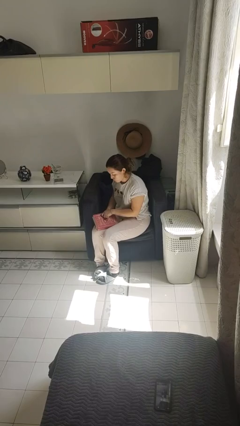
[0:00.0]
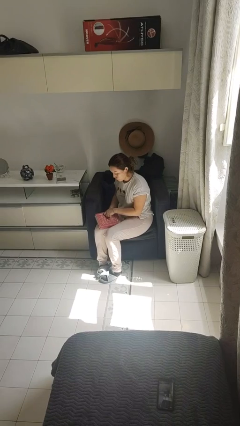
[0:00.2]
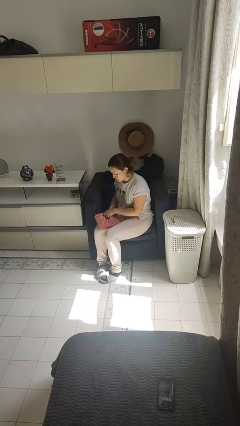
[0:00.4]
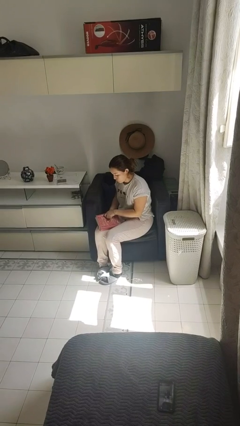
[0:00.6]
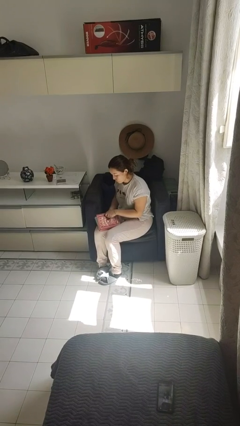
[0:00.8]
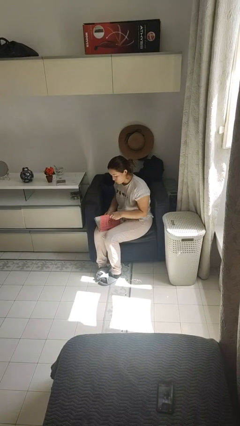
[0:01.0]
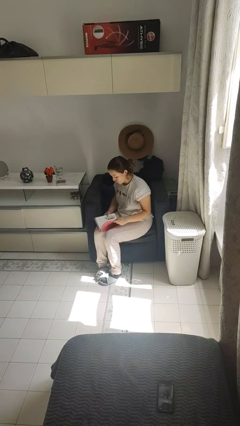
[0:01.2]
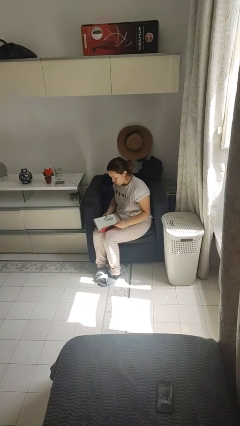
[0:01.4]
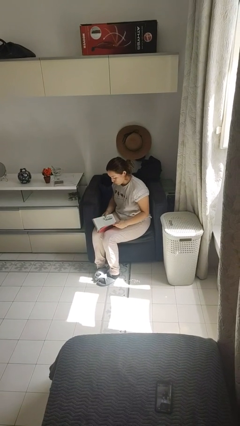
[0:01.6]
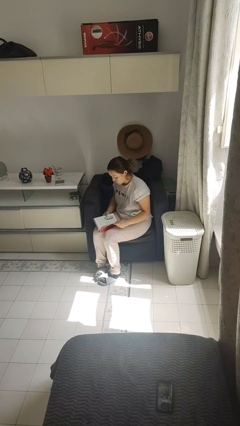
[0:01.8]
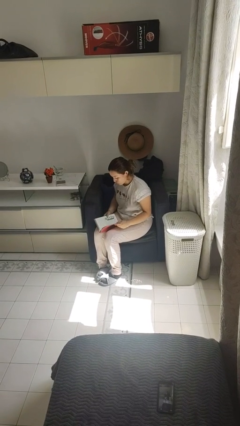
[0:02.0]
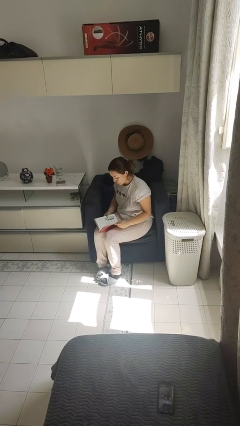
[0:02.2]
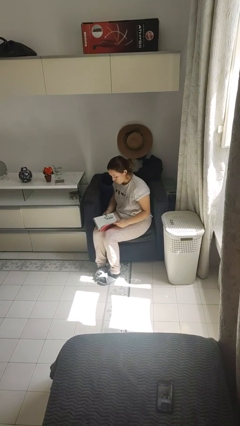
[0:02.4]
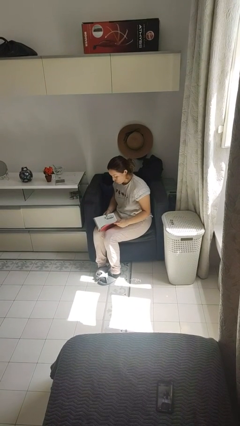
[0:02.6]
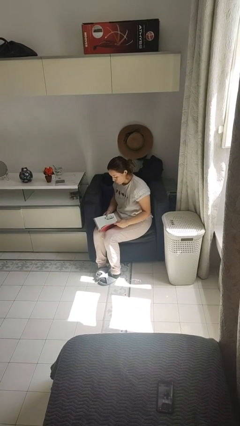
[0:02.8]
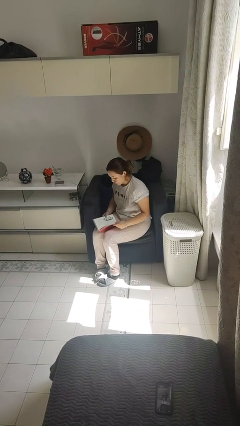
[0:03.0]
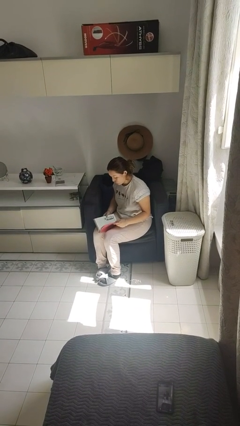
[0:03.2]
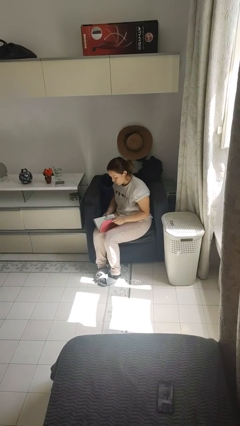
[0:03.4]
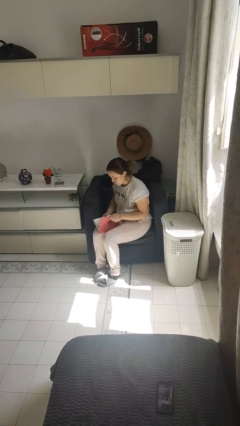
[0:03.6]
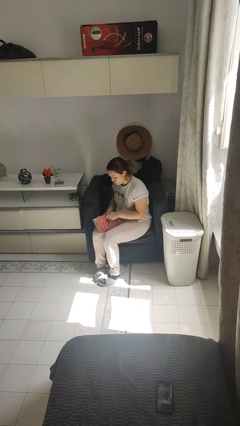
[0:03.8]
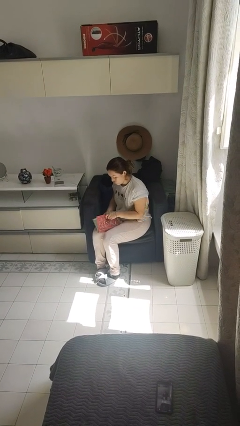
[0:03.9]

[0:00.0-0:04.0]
person reads book

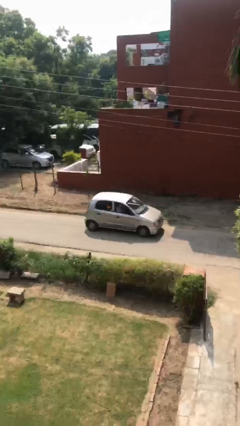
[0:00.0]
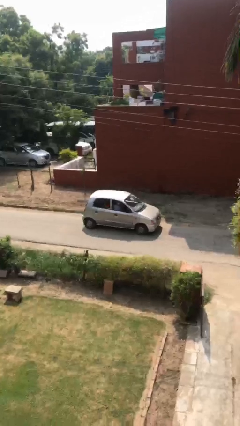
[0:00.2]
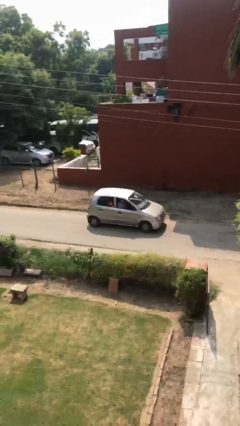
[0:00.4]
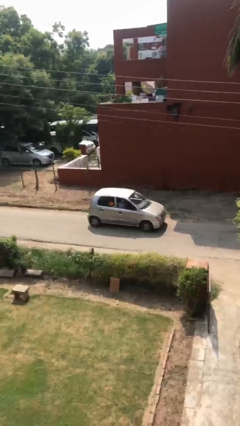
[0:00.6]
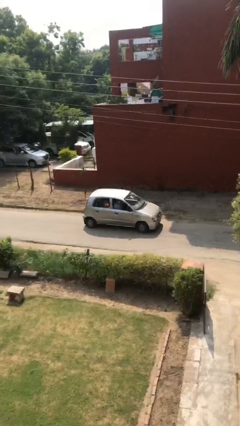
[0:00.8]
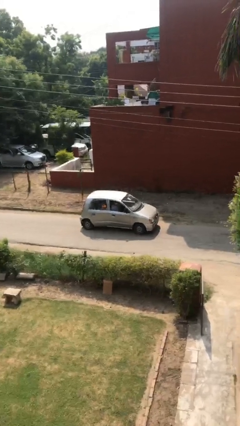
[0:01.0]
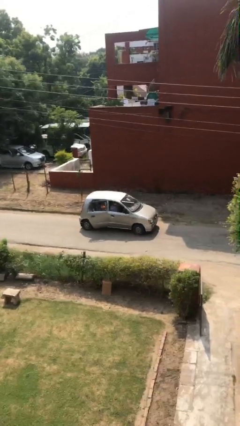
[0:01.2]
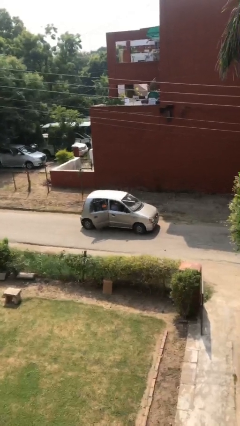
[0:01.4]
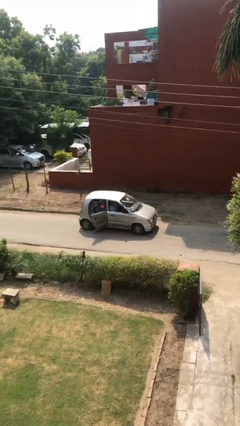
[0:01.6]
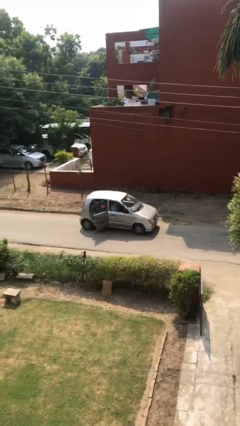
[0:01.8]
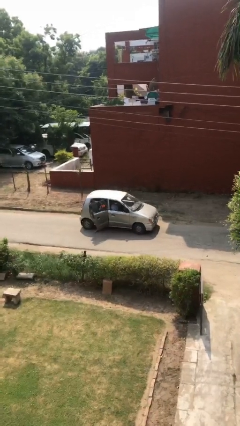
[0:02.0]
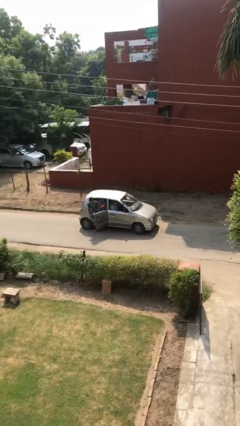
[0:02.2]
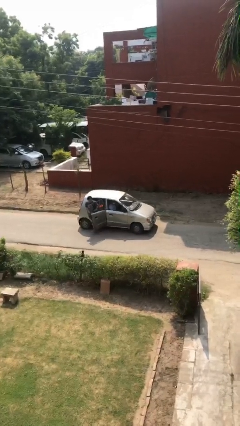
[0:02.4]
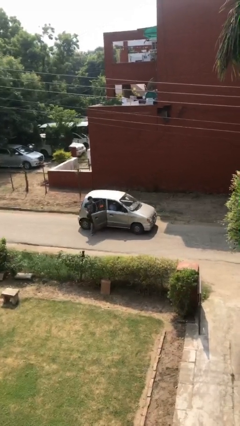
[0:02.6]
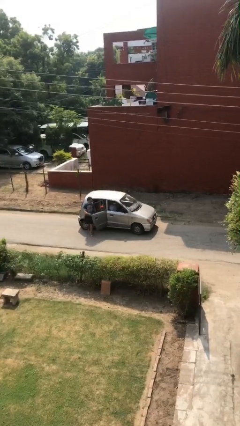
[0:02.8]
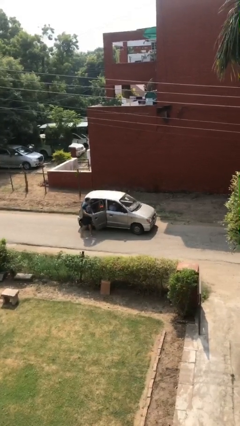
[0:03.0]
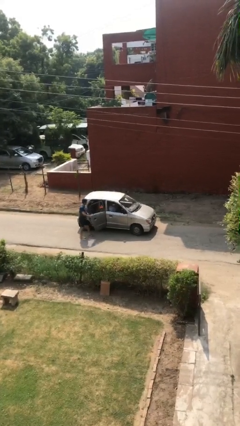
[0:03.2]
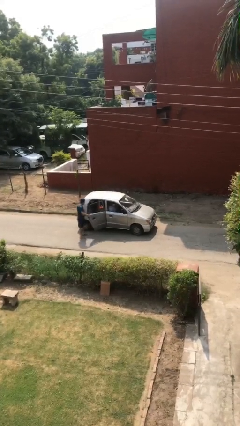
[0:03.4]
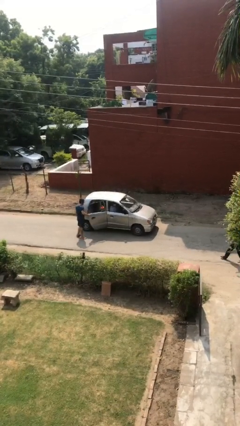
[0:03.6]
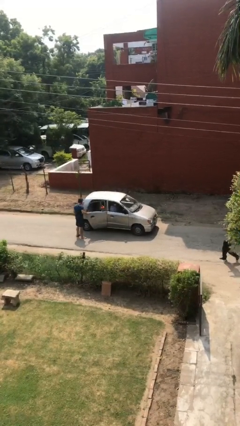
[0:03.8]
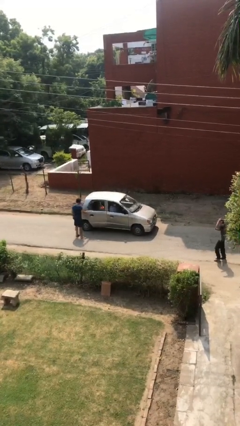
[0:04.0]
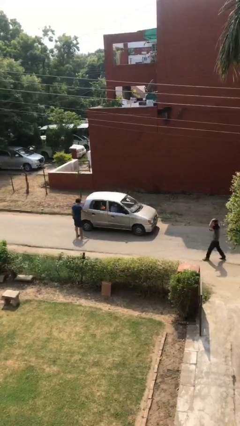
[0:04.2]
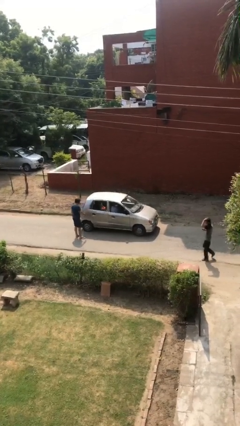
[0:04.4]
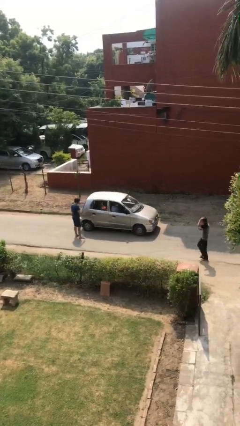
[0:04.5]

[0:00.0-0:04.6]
car drops off person

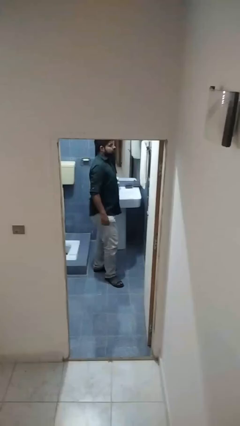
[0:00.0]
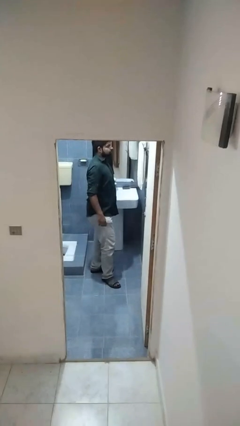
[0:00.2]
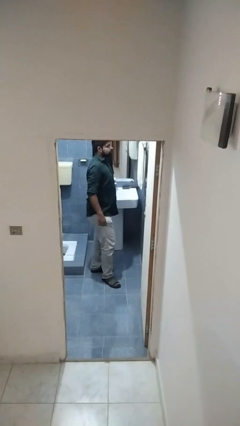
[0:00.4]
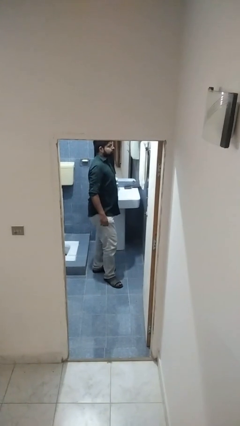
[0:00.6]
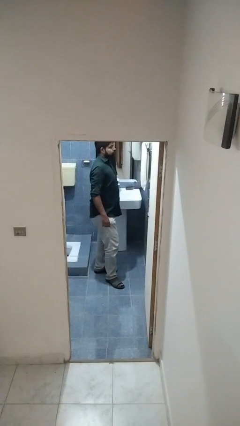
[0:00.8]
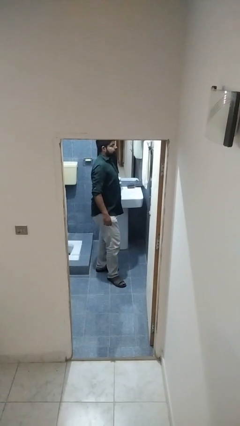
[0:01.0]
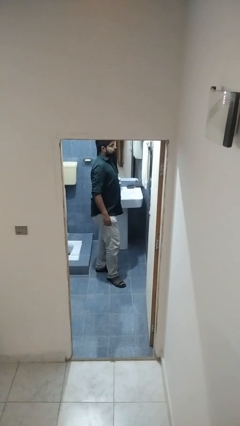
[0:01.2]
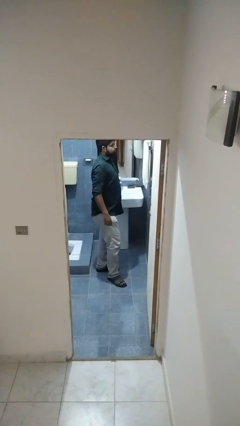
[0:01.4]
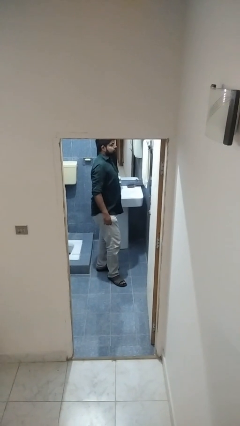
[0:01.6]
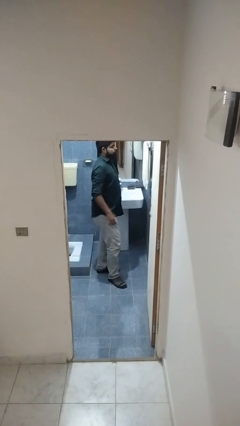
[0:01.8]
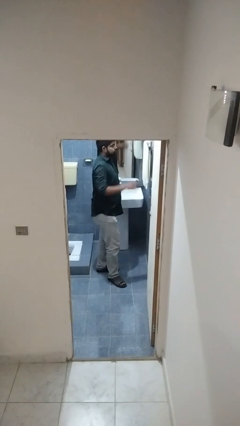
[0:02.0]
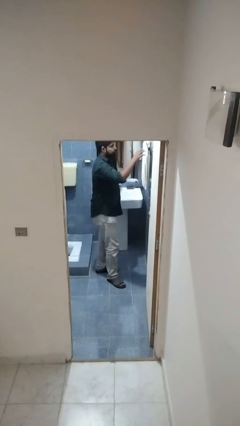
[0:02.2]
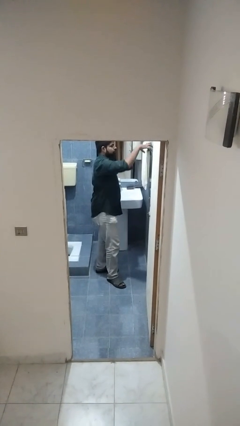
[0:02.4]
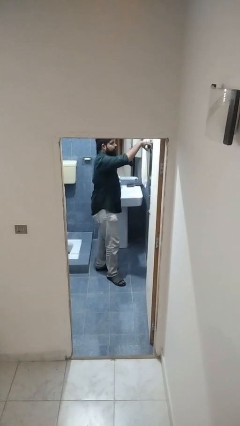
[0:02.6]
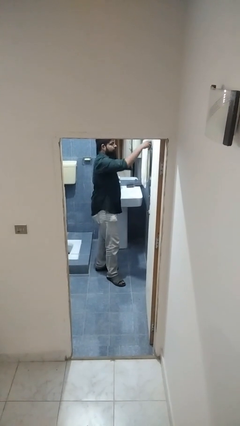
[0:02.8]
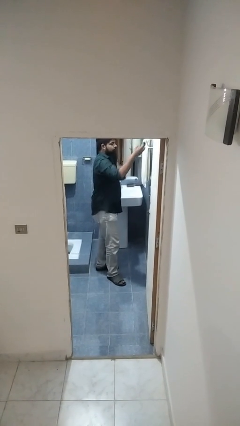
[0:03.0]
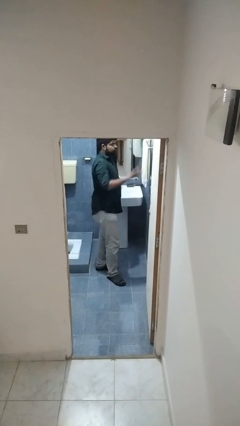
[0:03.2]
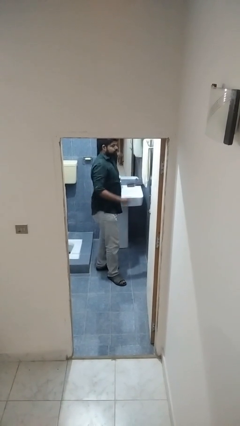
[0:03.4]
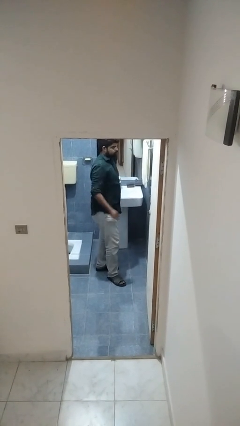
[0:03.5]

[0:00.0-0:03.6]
person picks up object from countertop

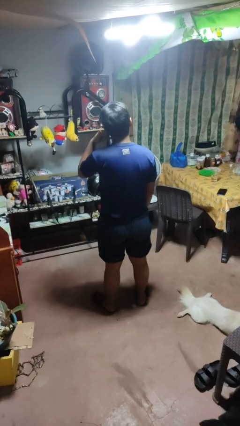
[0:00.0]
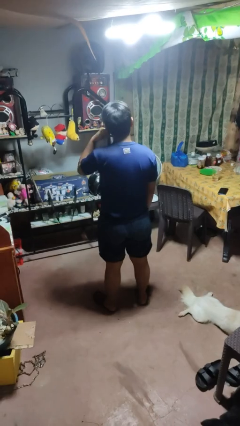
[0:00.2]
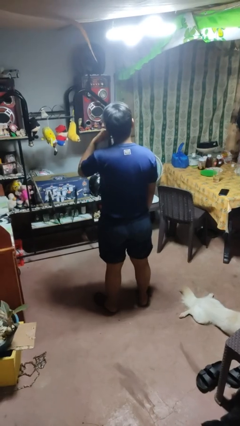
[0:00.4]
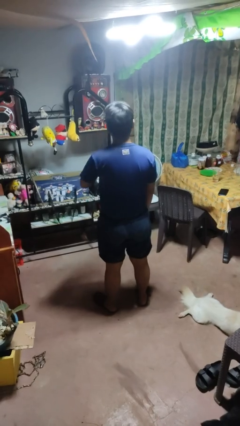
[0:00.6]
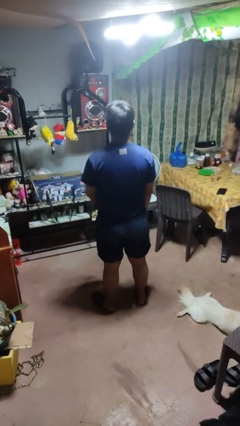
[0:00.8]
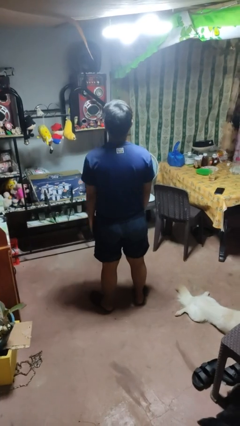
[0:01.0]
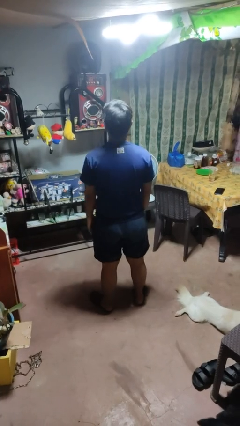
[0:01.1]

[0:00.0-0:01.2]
person gestures call me

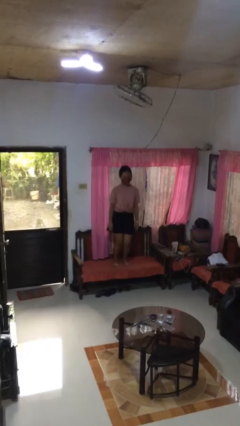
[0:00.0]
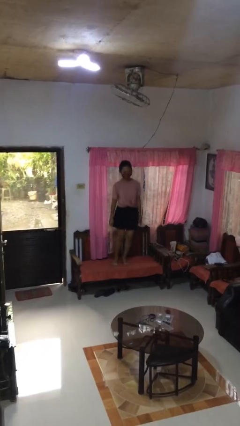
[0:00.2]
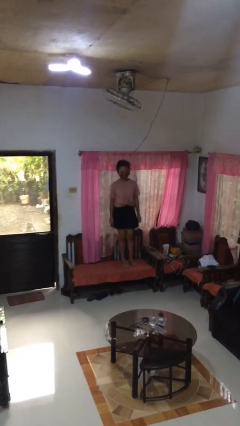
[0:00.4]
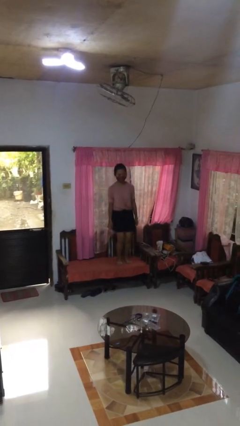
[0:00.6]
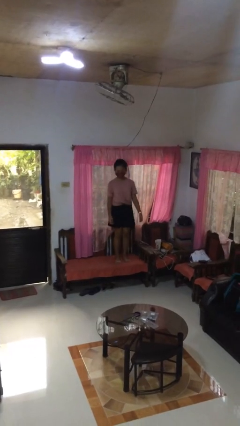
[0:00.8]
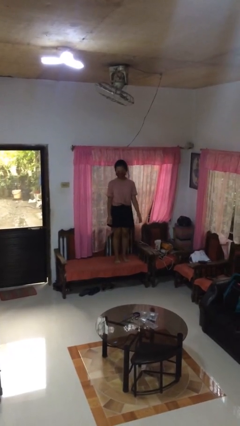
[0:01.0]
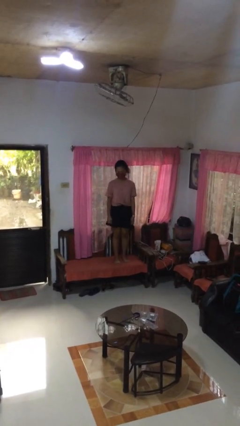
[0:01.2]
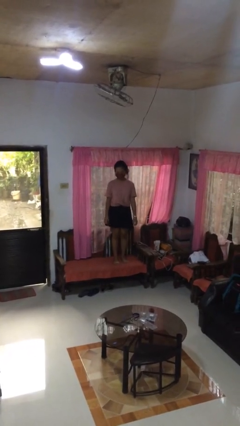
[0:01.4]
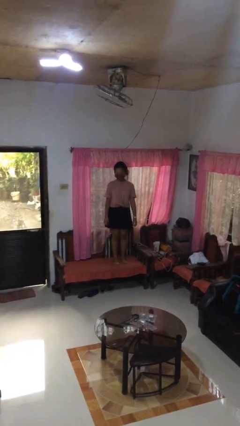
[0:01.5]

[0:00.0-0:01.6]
person jumps on couch

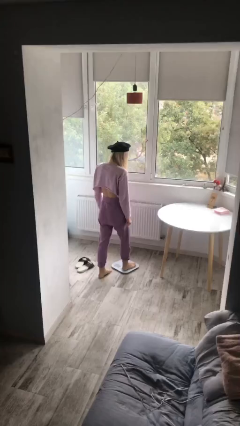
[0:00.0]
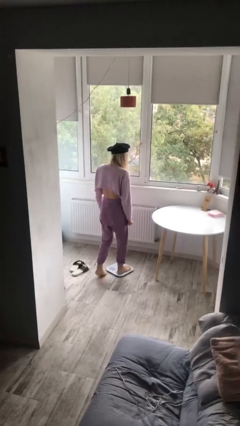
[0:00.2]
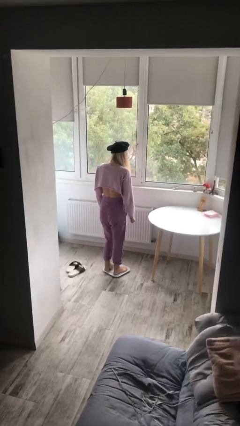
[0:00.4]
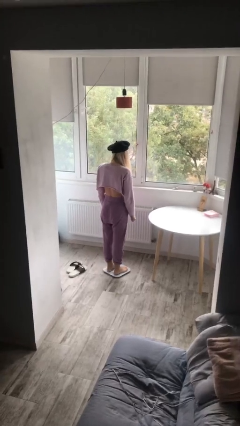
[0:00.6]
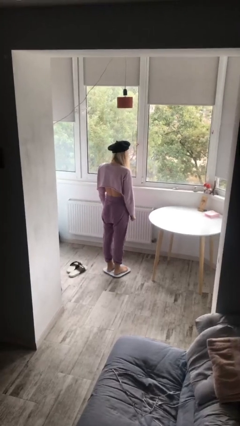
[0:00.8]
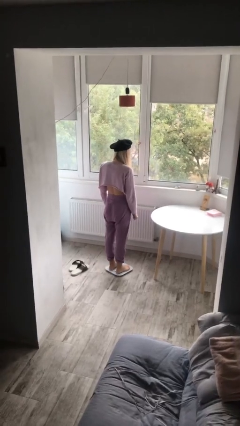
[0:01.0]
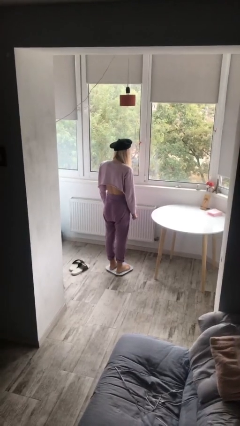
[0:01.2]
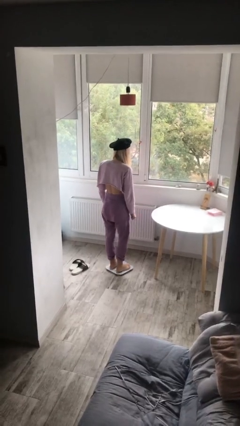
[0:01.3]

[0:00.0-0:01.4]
person uses bodyweight scale

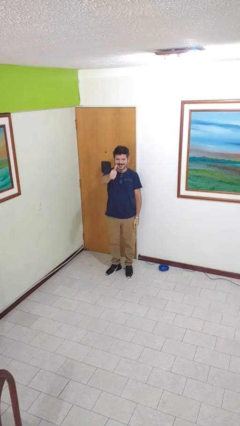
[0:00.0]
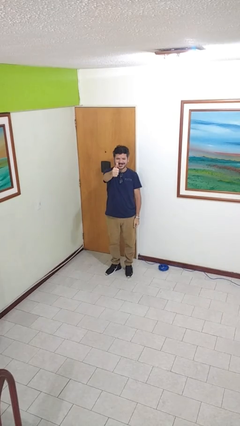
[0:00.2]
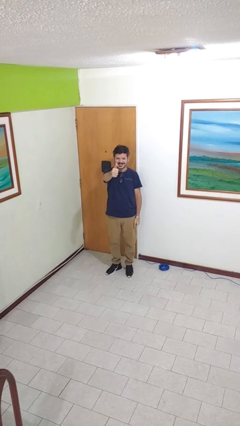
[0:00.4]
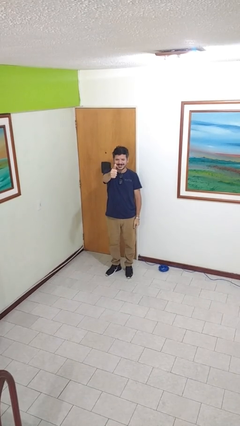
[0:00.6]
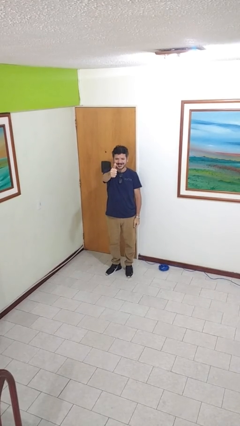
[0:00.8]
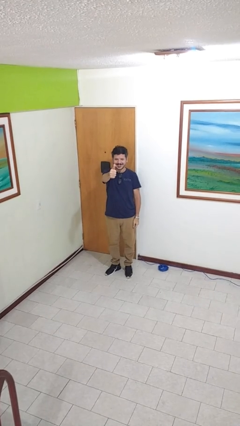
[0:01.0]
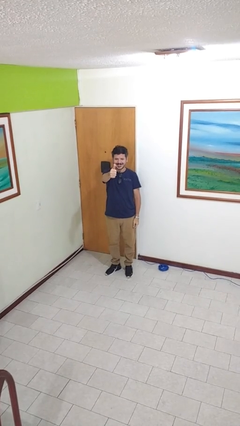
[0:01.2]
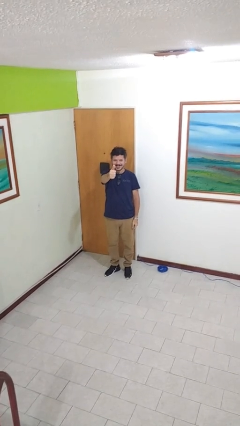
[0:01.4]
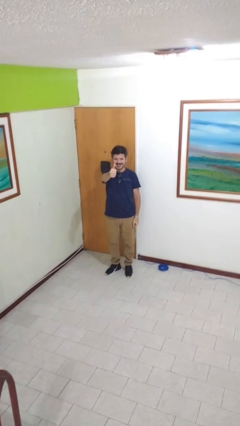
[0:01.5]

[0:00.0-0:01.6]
person gestures thumbs up
